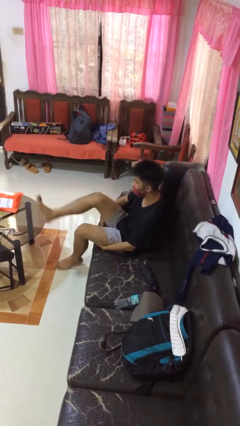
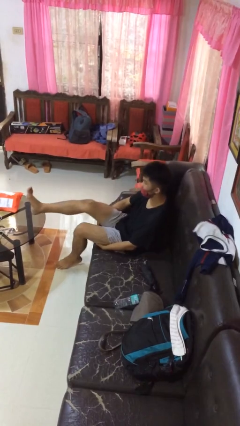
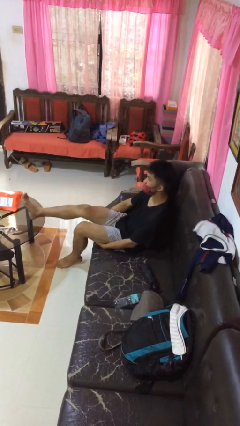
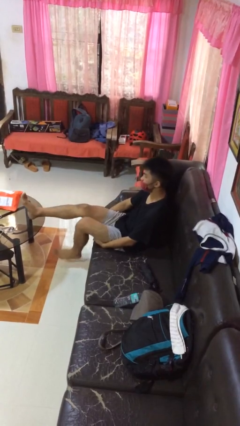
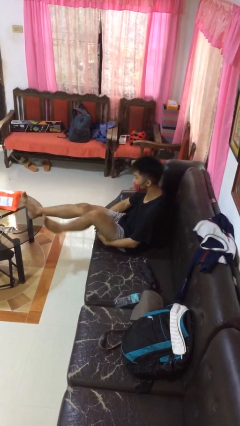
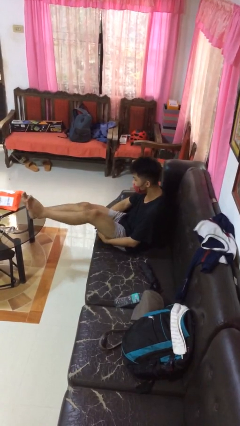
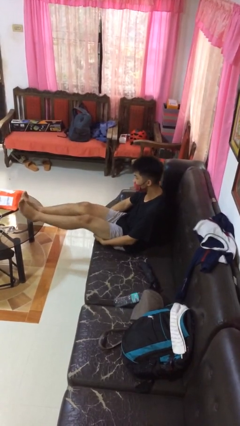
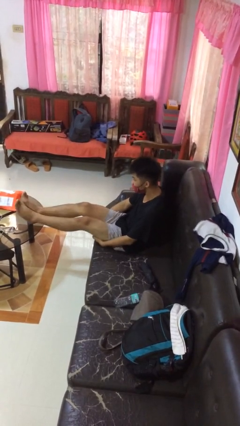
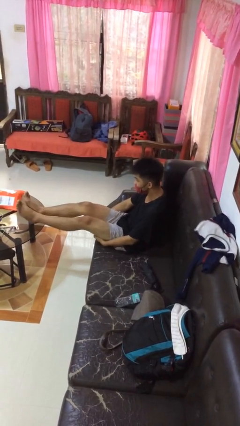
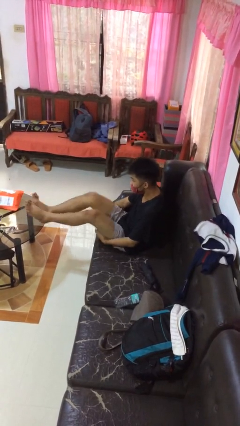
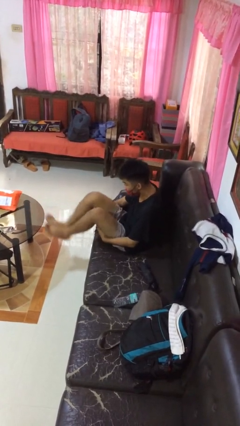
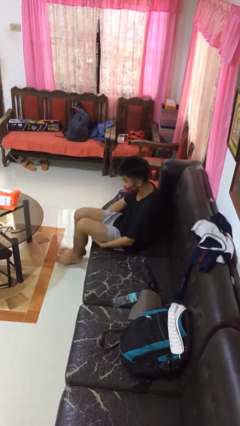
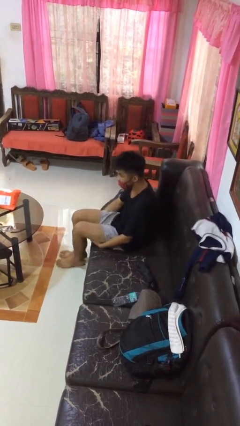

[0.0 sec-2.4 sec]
person puts feet up

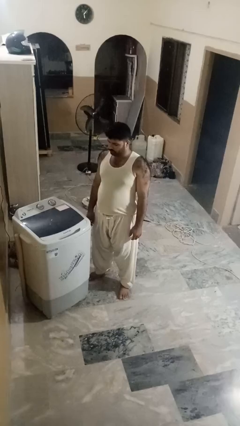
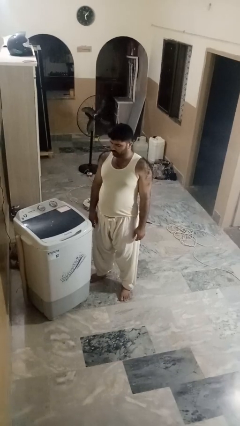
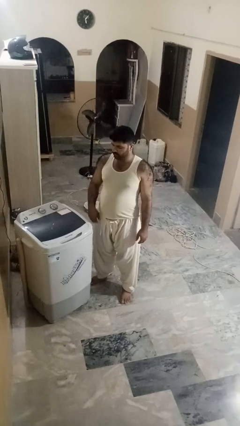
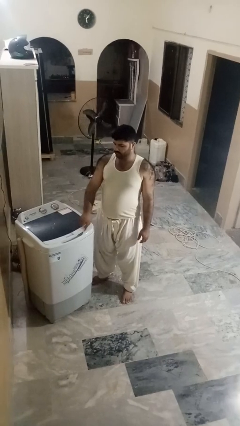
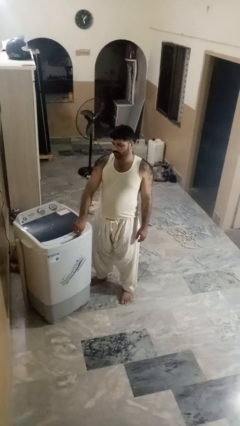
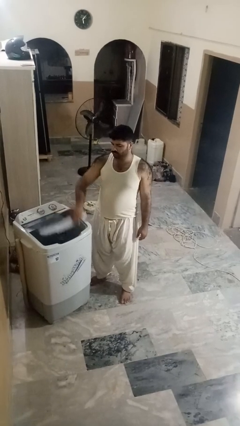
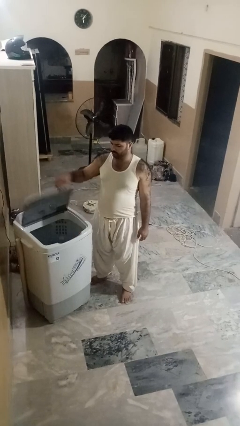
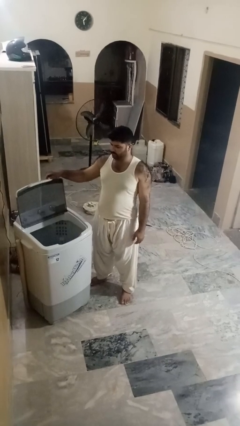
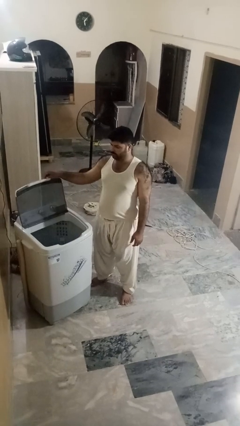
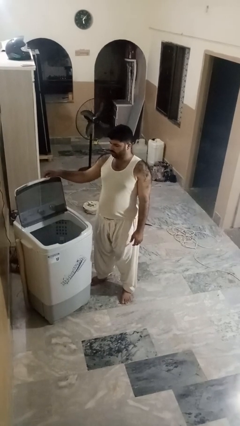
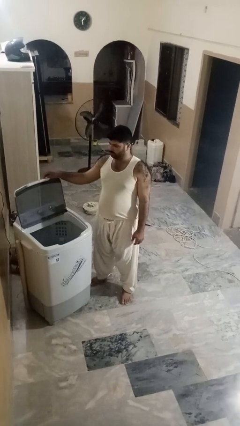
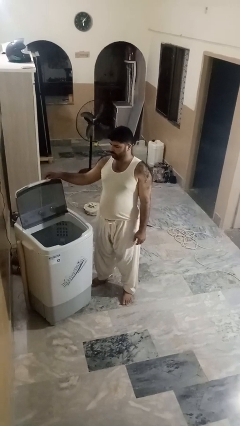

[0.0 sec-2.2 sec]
person opens clothes washer

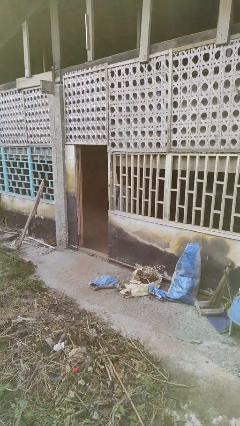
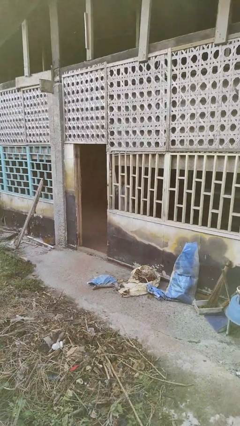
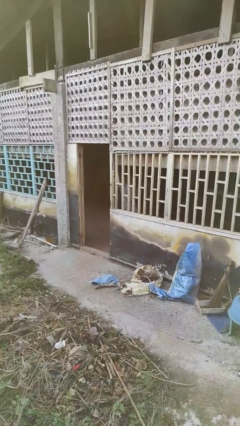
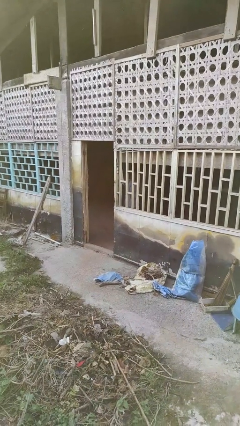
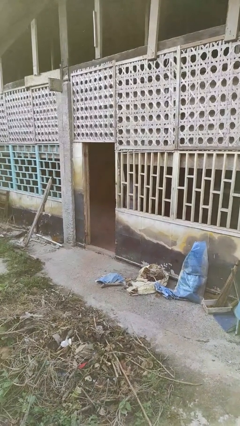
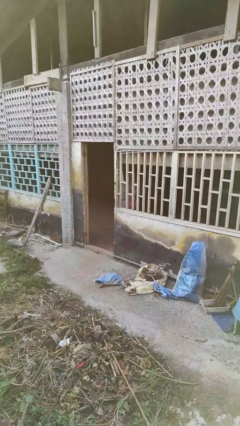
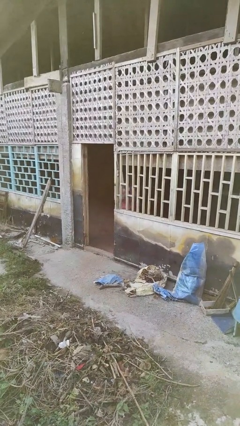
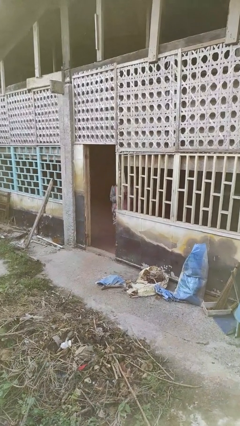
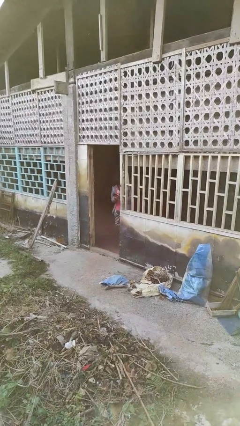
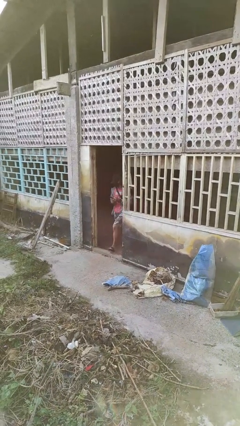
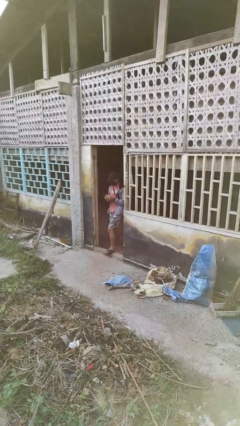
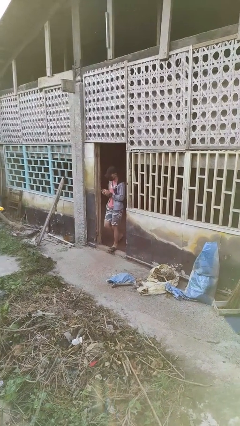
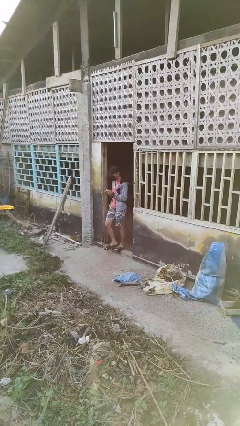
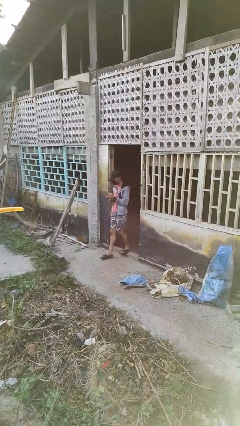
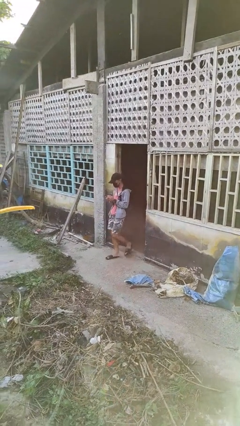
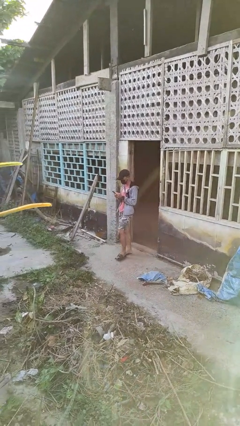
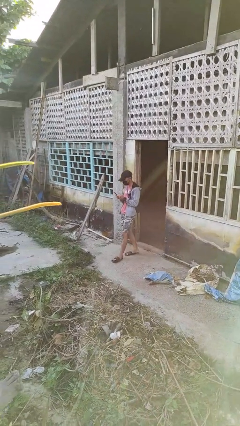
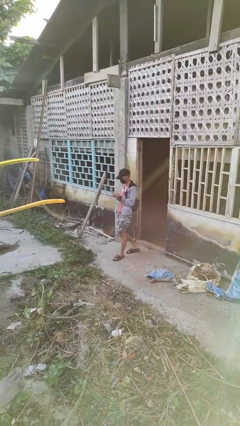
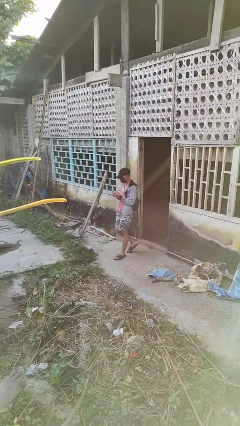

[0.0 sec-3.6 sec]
person enters scene through structure

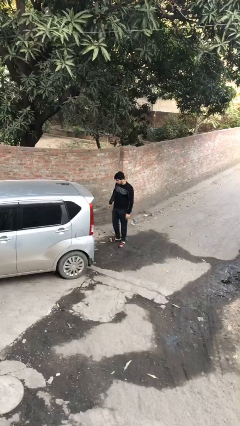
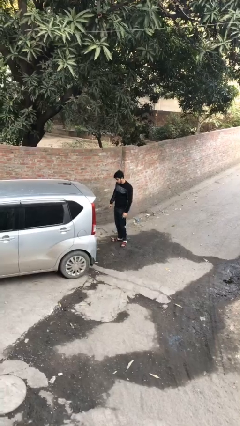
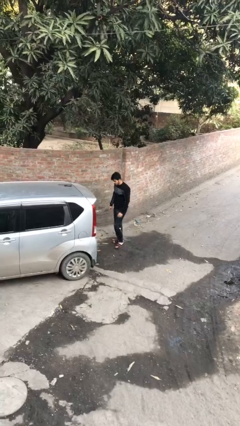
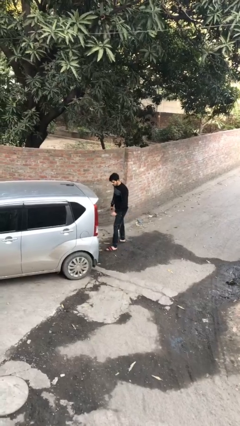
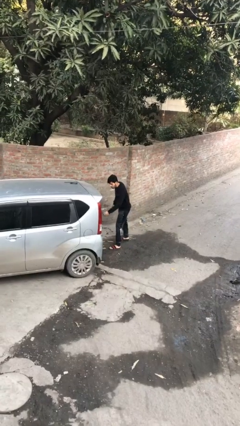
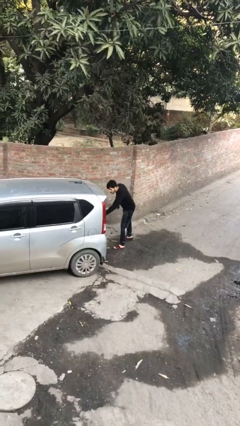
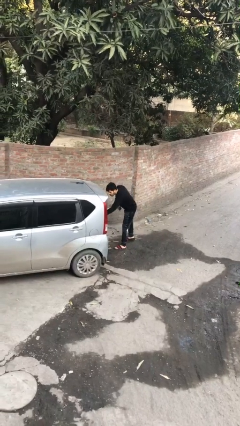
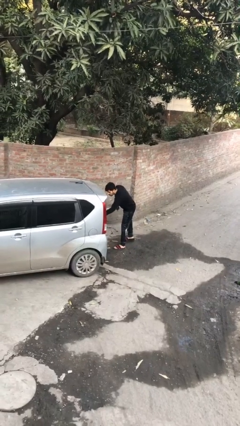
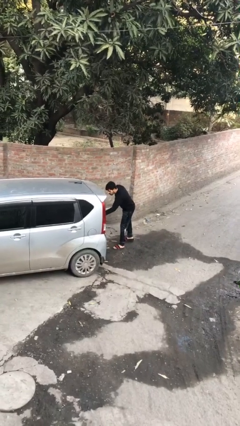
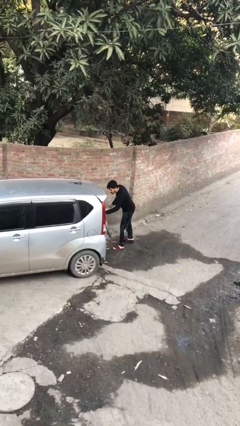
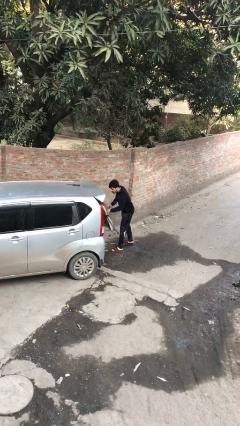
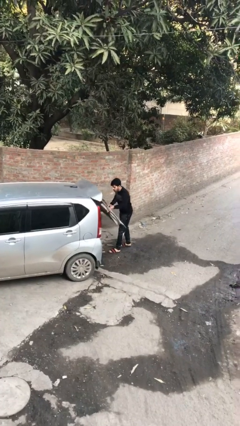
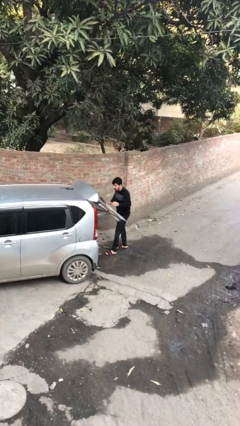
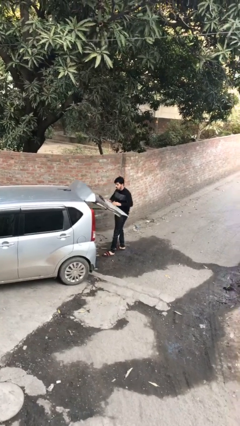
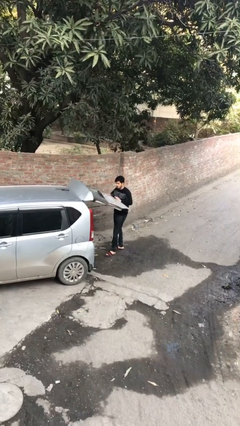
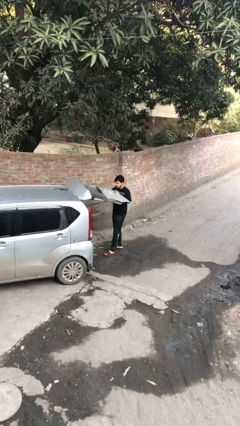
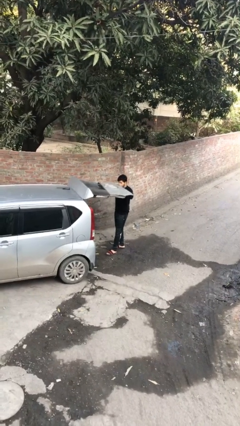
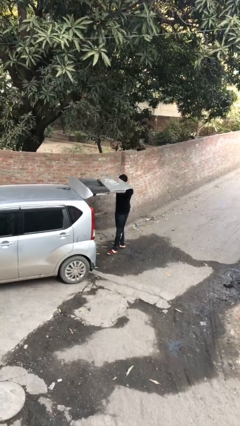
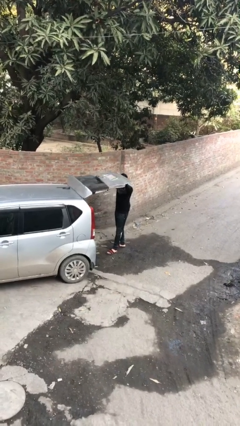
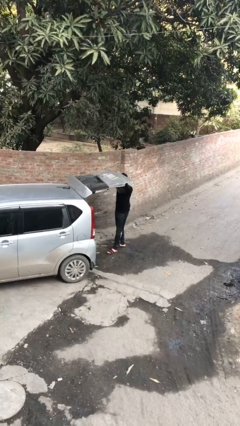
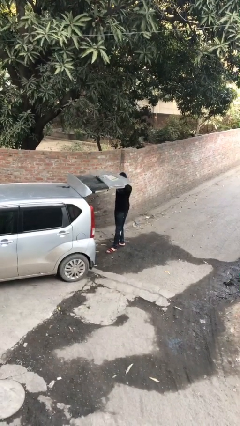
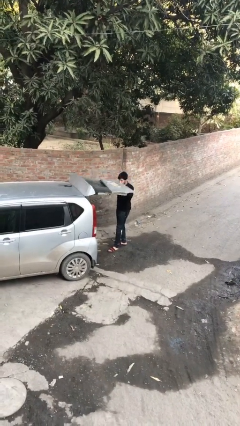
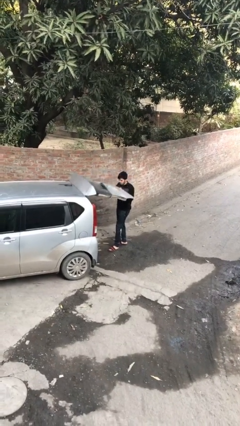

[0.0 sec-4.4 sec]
person opens car trunk

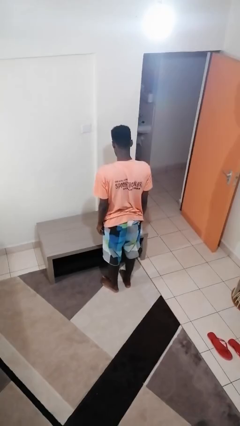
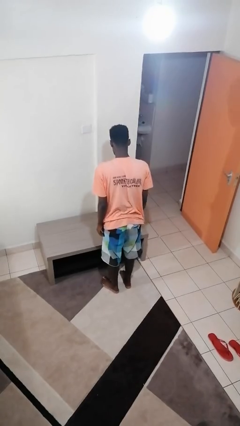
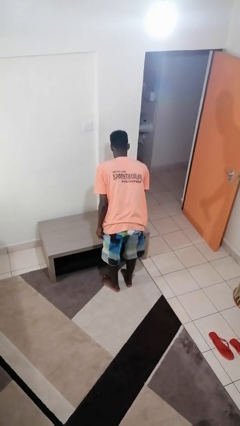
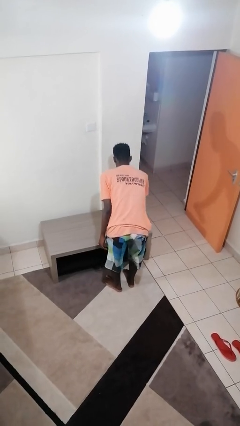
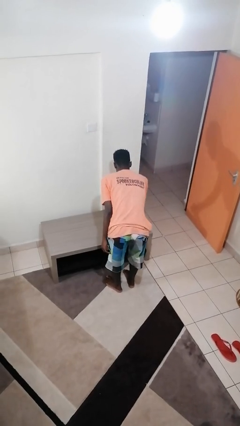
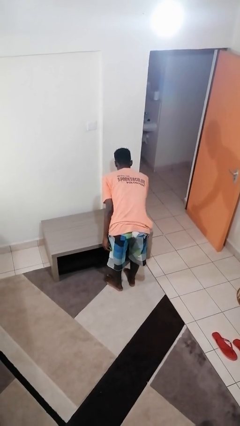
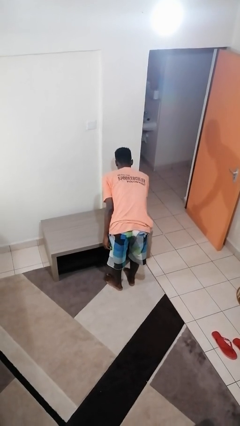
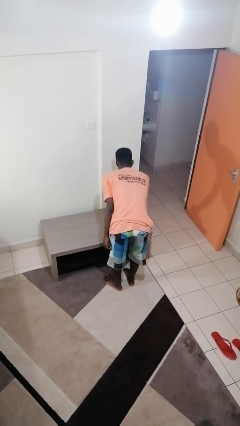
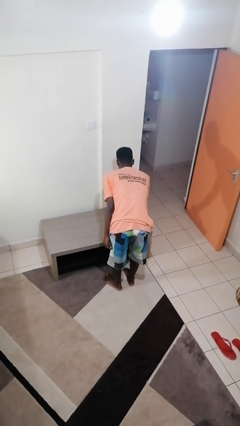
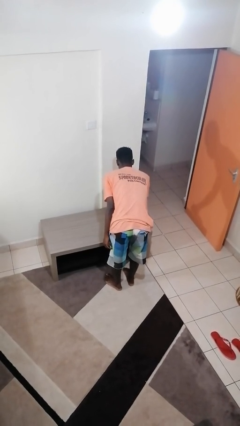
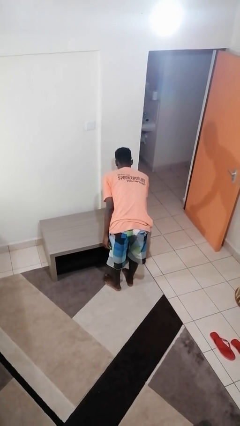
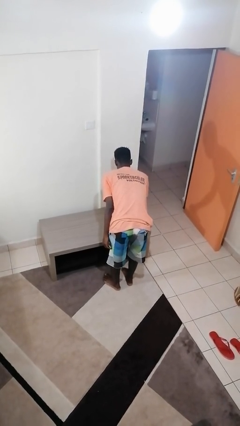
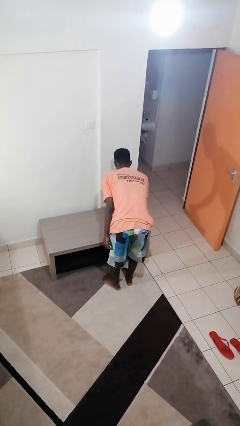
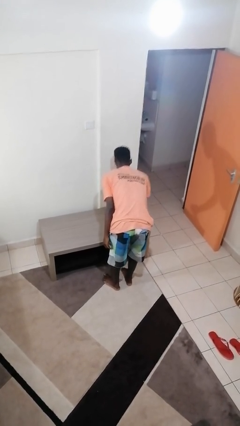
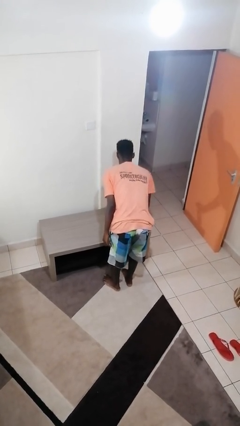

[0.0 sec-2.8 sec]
person sprays from bottle

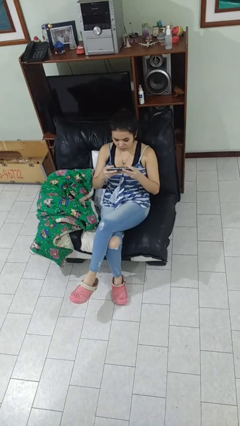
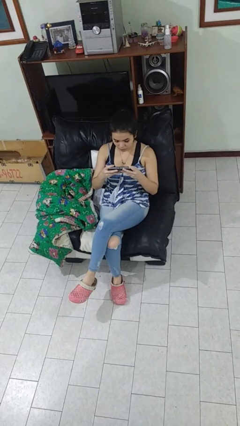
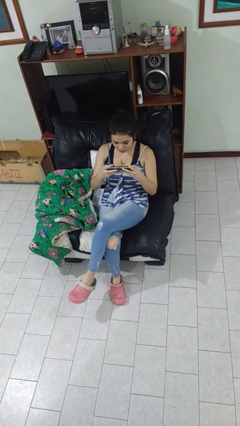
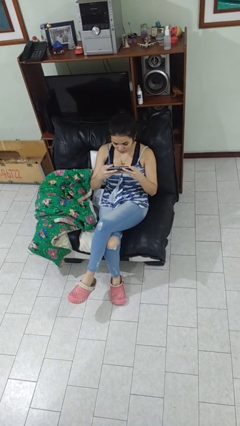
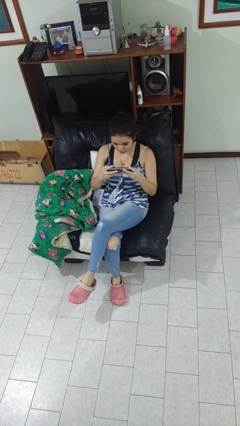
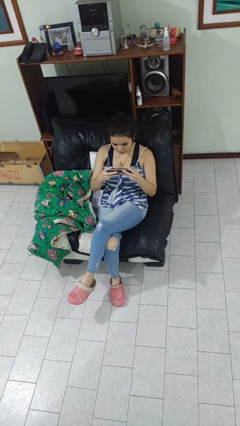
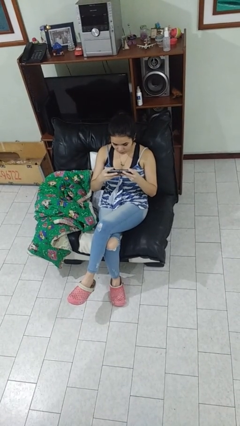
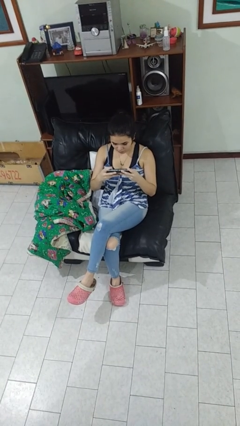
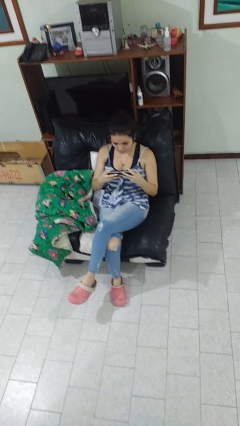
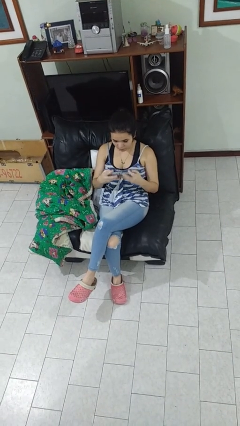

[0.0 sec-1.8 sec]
person interacts with handheld game
